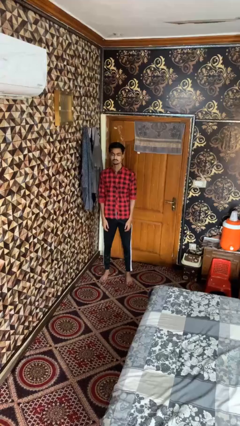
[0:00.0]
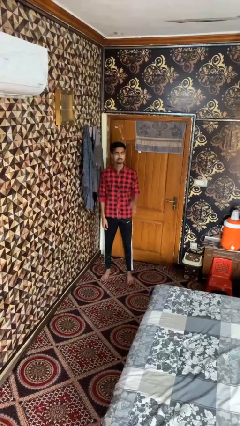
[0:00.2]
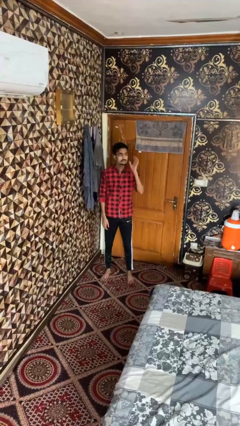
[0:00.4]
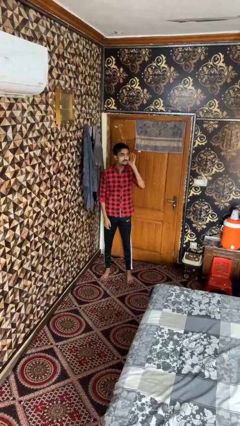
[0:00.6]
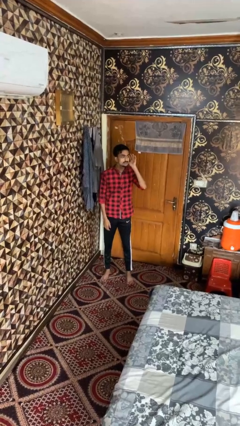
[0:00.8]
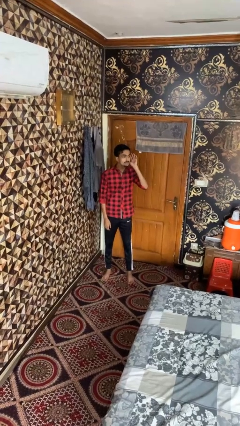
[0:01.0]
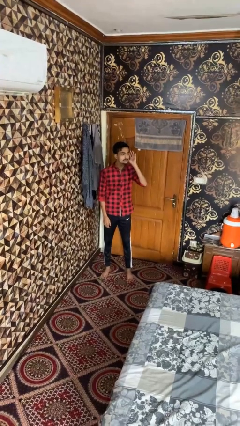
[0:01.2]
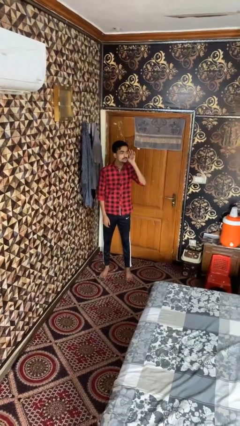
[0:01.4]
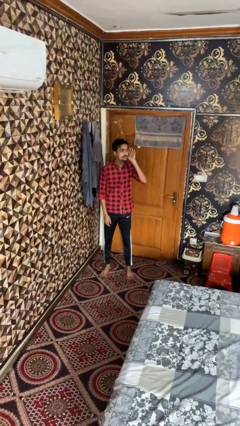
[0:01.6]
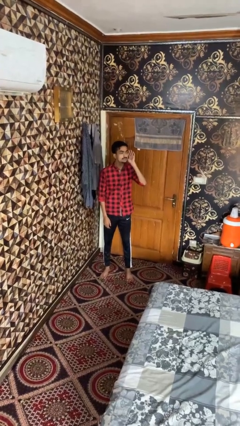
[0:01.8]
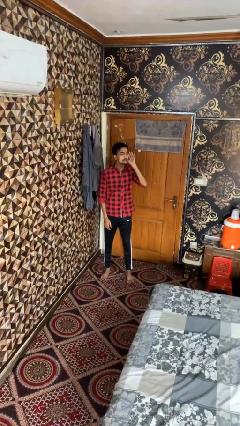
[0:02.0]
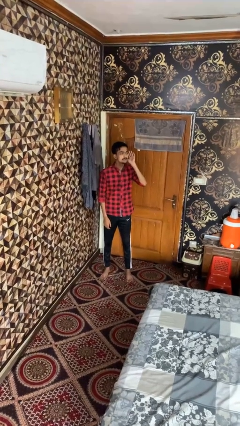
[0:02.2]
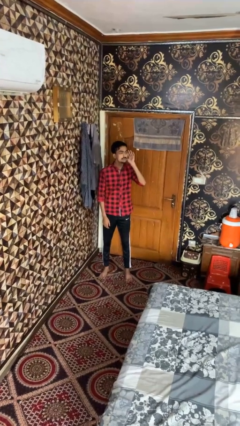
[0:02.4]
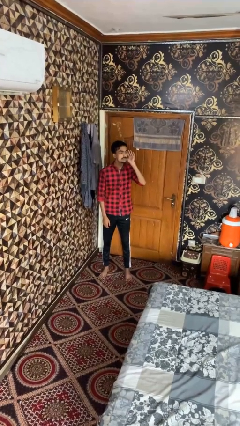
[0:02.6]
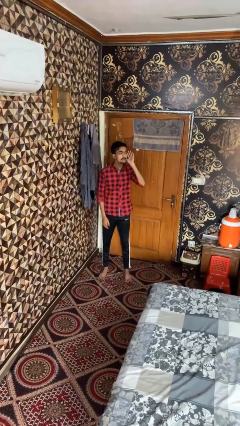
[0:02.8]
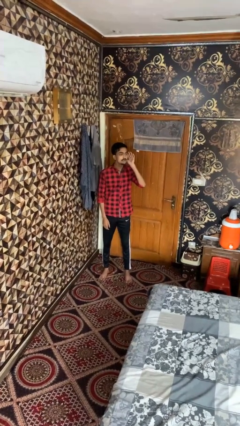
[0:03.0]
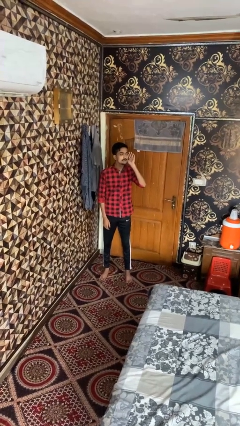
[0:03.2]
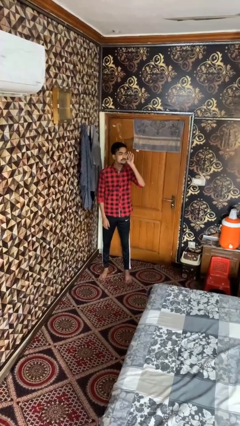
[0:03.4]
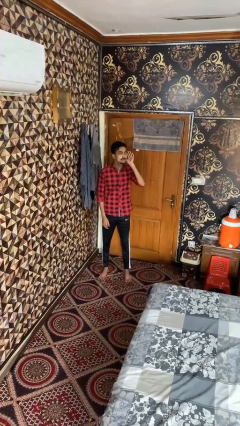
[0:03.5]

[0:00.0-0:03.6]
person gestures listen closely

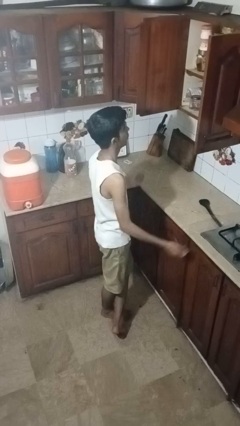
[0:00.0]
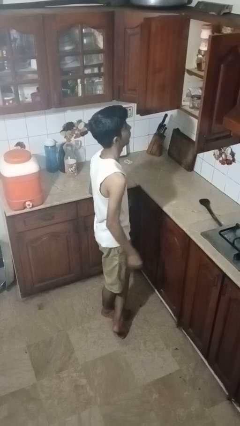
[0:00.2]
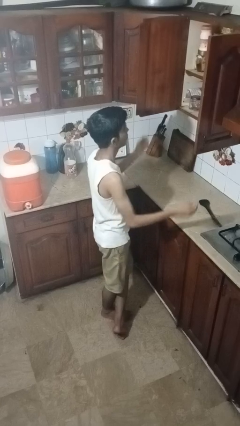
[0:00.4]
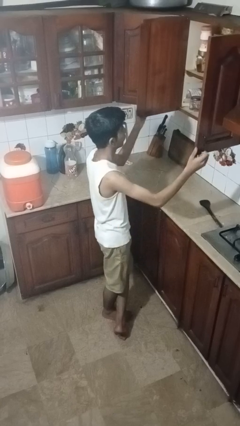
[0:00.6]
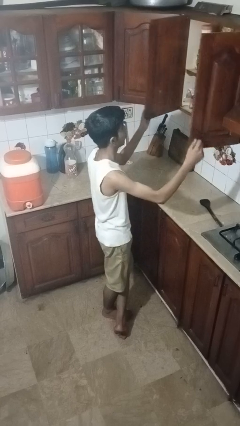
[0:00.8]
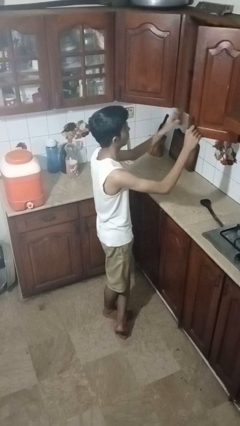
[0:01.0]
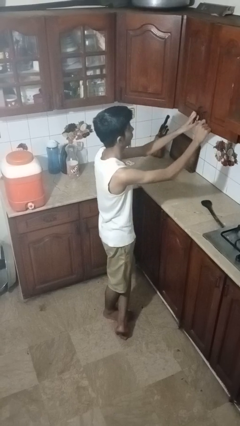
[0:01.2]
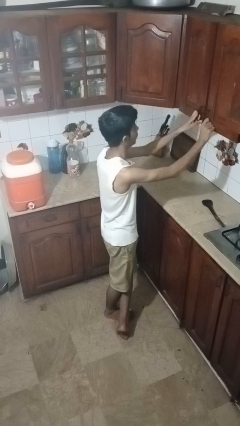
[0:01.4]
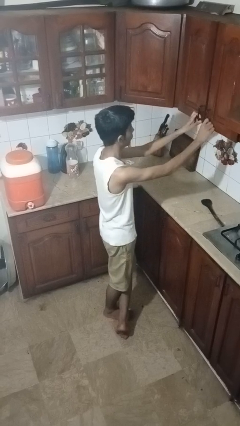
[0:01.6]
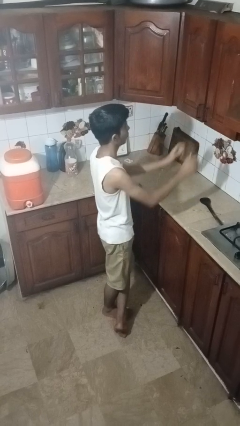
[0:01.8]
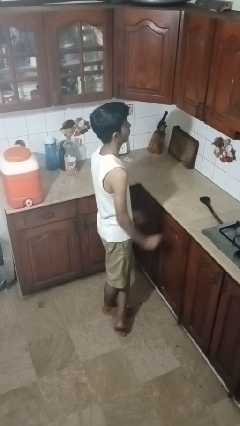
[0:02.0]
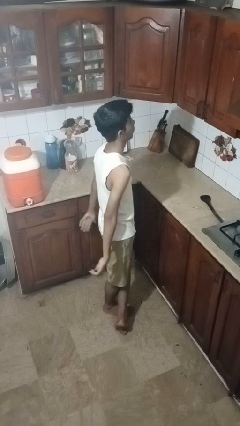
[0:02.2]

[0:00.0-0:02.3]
person closes cabinet

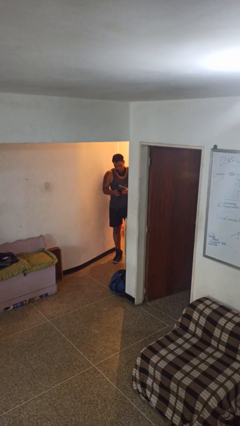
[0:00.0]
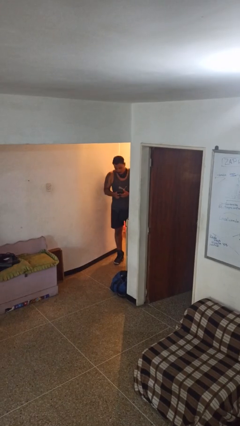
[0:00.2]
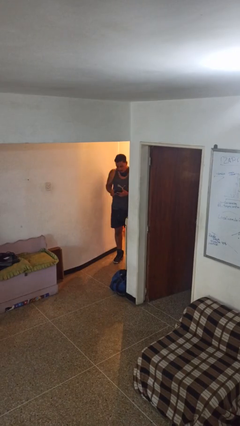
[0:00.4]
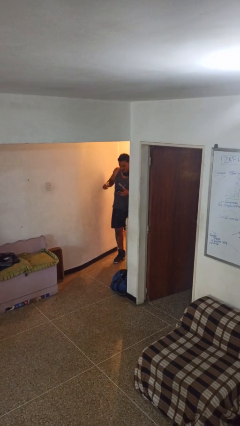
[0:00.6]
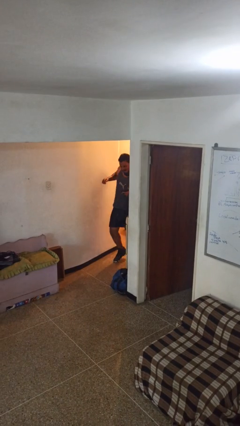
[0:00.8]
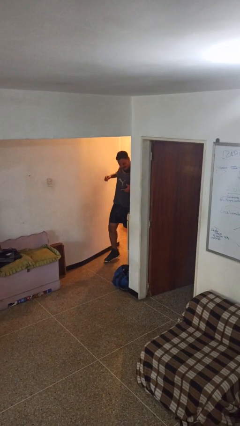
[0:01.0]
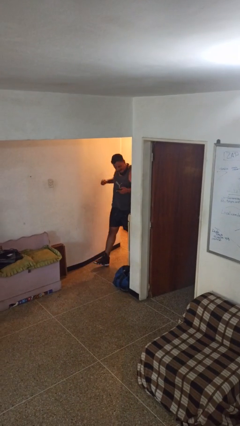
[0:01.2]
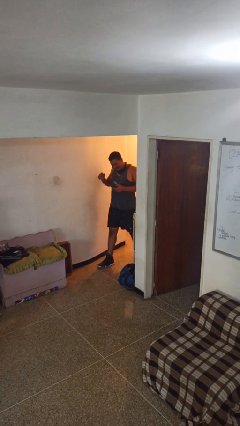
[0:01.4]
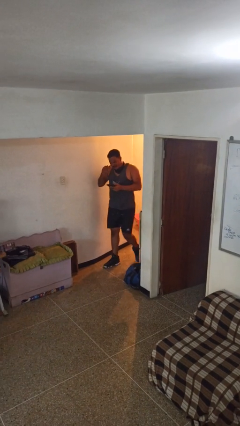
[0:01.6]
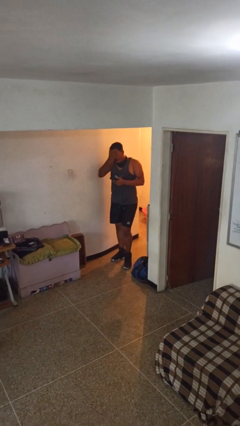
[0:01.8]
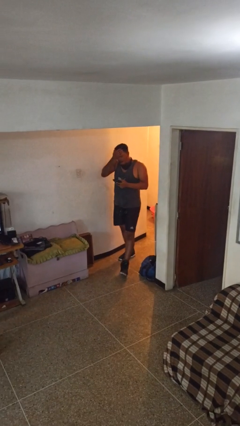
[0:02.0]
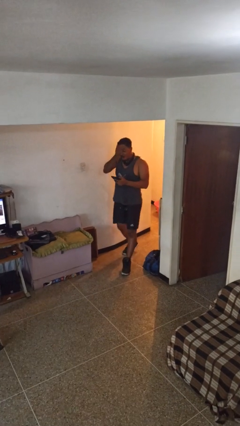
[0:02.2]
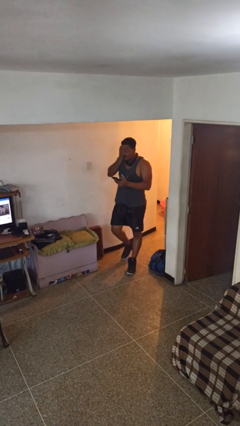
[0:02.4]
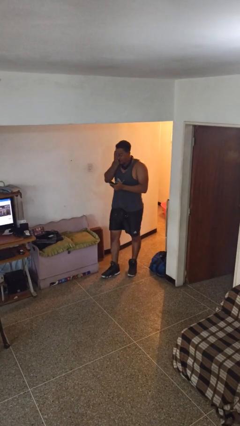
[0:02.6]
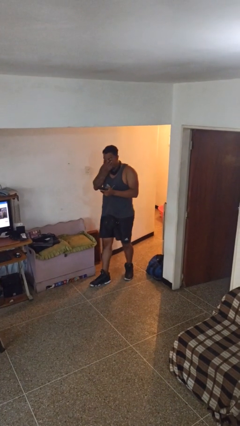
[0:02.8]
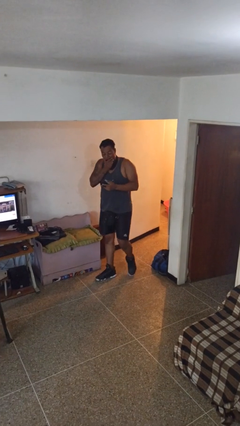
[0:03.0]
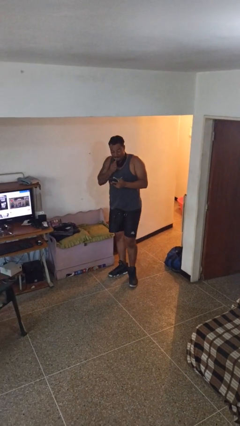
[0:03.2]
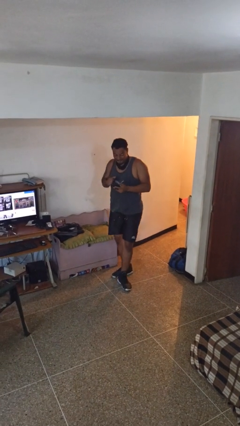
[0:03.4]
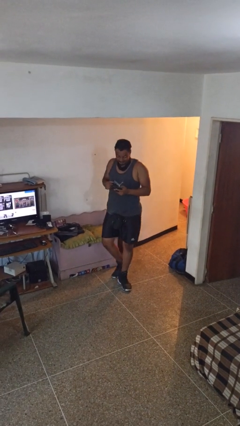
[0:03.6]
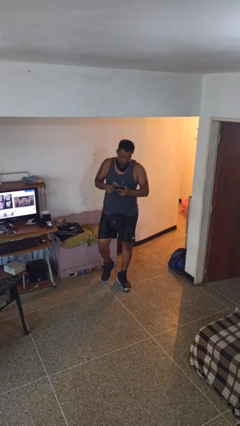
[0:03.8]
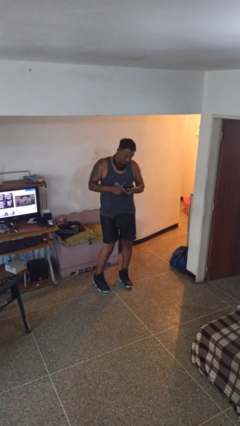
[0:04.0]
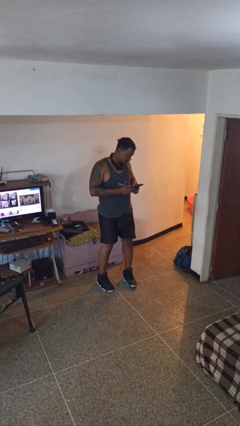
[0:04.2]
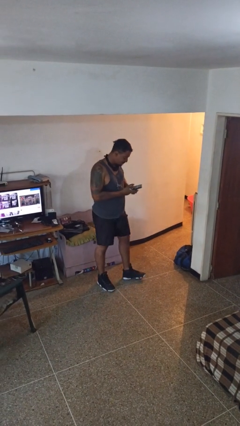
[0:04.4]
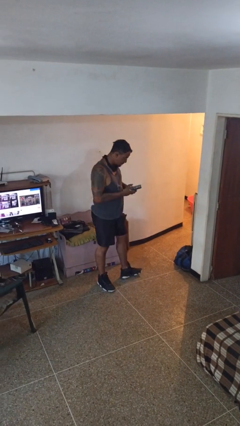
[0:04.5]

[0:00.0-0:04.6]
person enters scene through structure

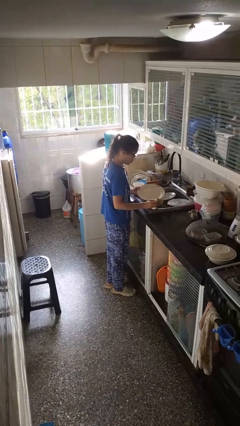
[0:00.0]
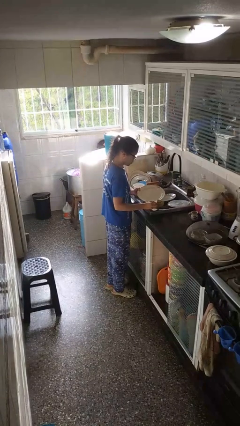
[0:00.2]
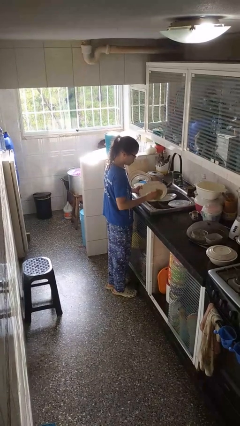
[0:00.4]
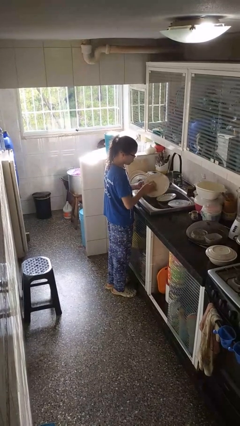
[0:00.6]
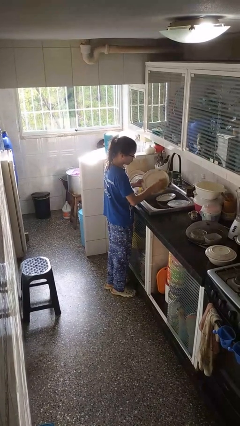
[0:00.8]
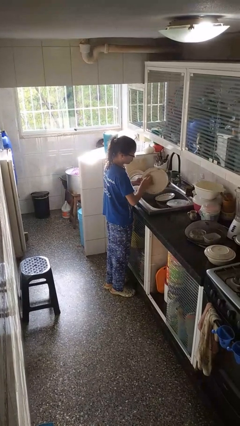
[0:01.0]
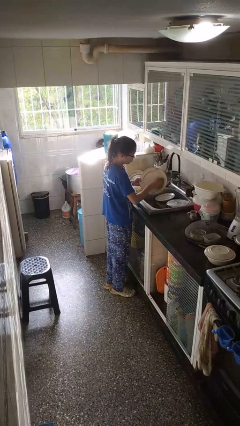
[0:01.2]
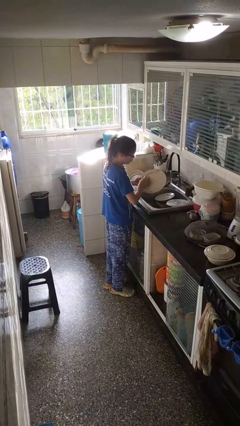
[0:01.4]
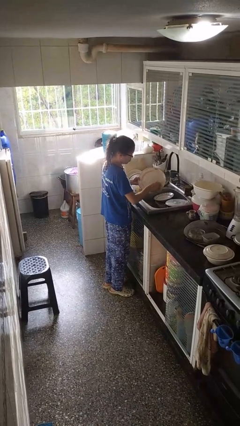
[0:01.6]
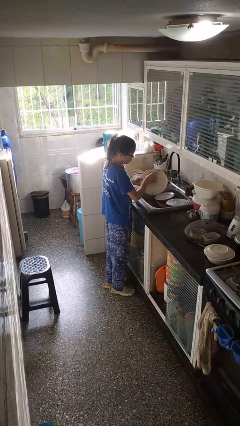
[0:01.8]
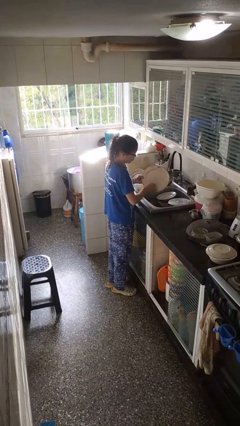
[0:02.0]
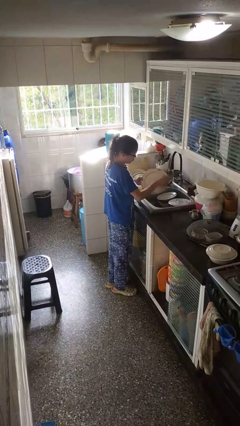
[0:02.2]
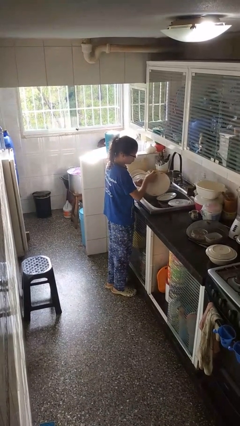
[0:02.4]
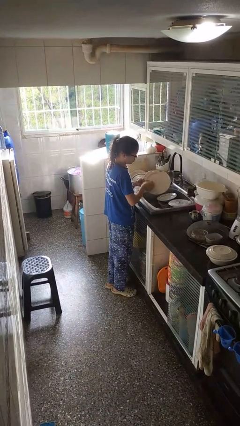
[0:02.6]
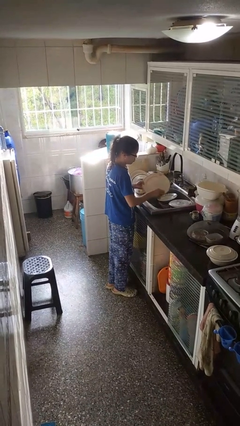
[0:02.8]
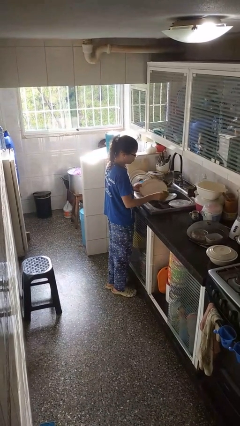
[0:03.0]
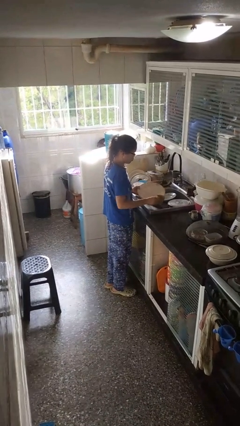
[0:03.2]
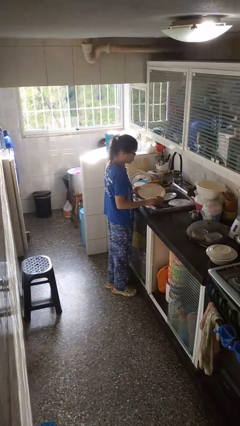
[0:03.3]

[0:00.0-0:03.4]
person washes dish

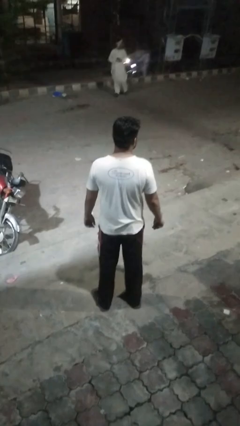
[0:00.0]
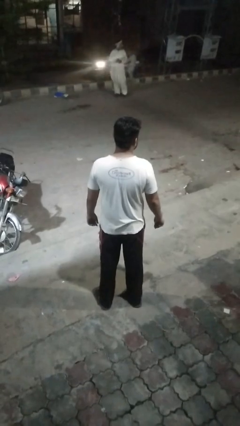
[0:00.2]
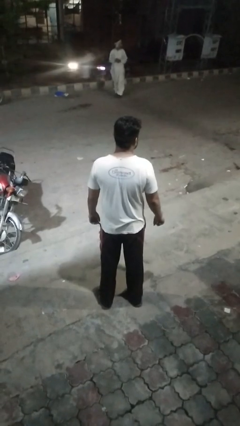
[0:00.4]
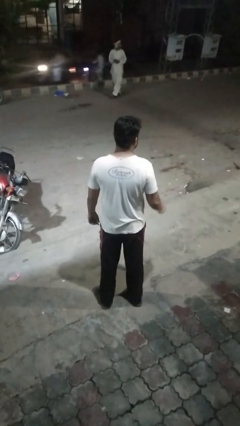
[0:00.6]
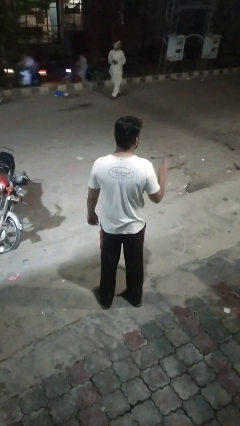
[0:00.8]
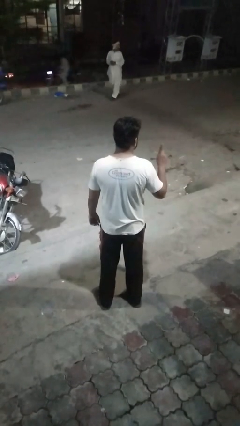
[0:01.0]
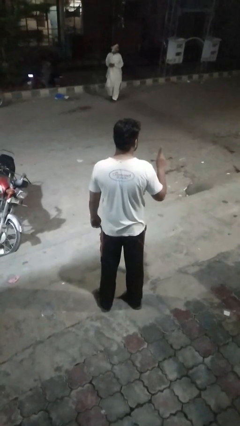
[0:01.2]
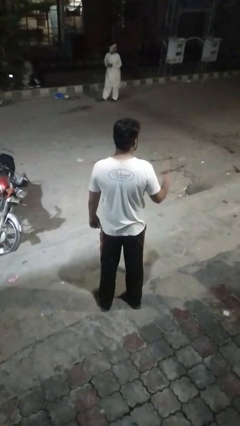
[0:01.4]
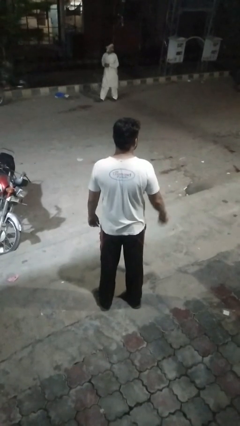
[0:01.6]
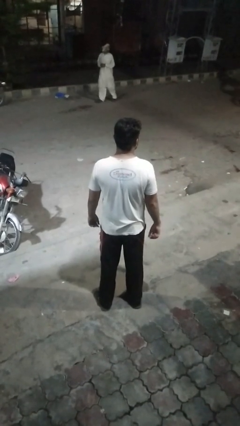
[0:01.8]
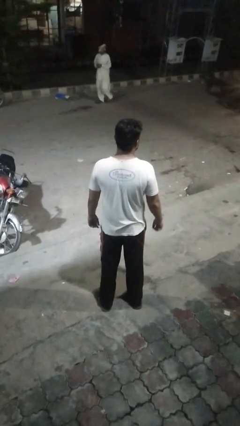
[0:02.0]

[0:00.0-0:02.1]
person gestures number one

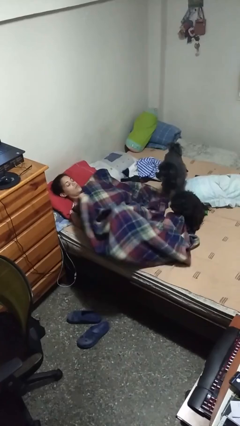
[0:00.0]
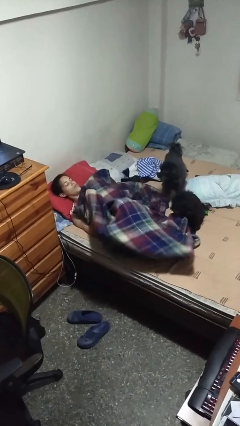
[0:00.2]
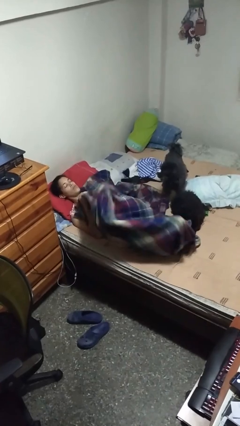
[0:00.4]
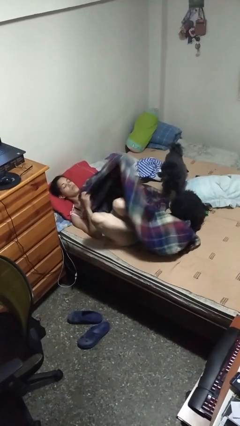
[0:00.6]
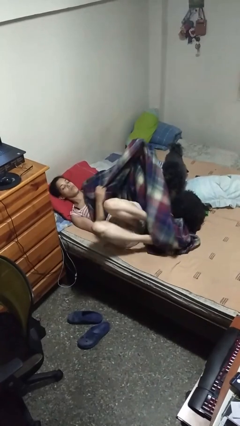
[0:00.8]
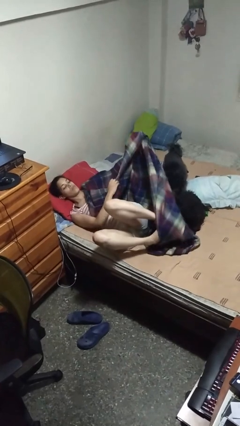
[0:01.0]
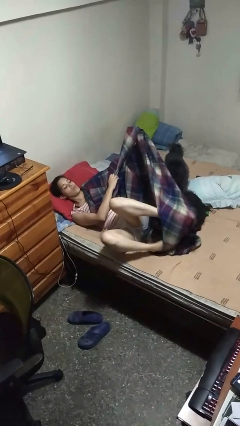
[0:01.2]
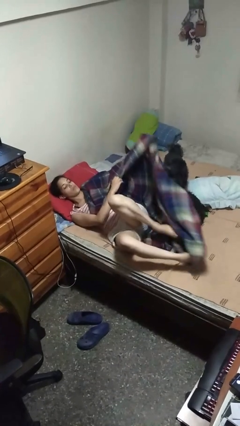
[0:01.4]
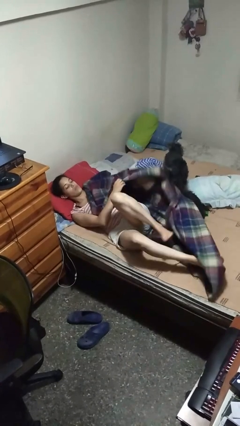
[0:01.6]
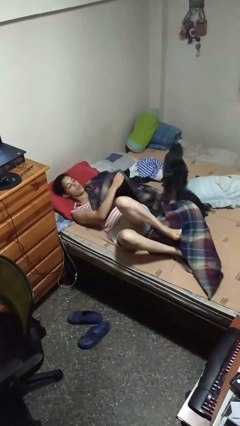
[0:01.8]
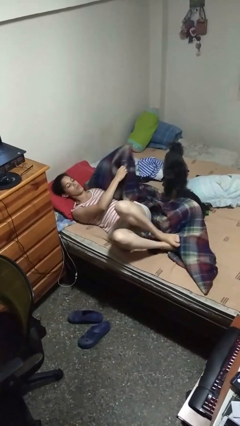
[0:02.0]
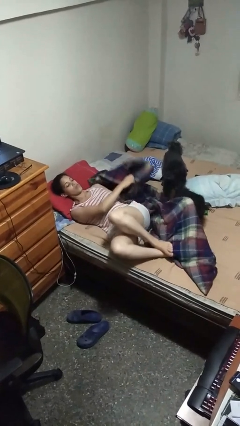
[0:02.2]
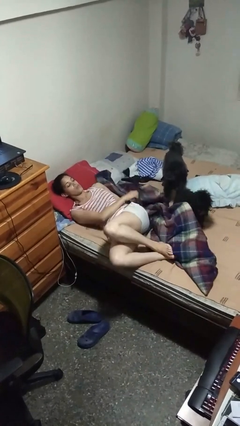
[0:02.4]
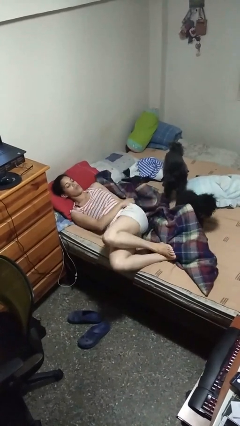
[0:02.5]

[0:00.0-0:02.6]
person uncovers with bedsheets
